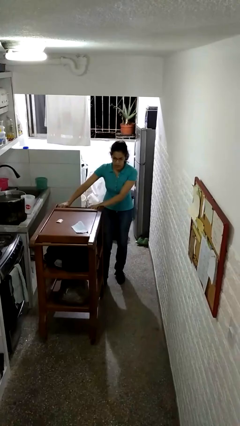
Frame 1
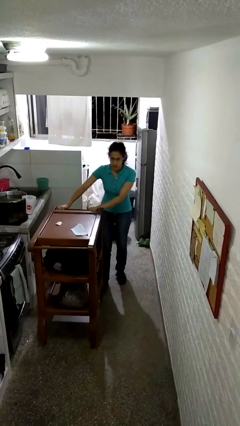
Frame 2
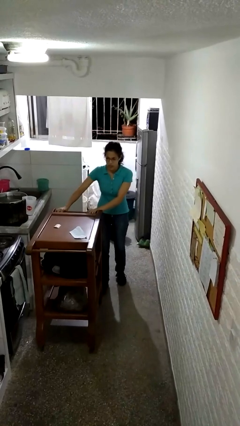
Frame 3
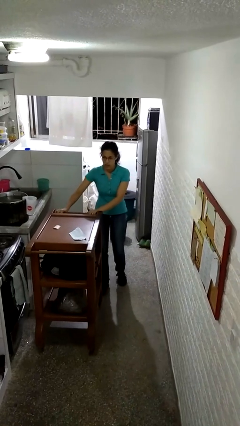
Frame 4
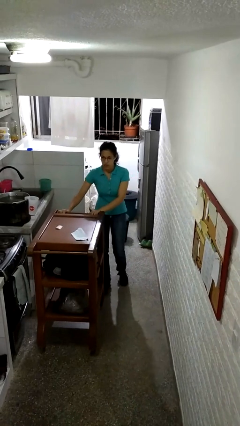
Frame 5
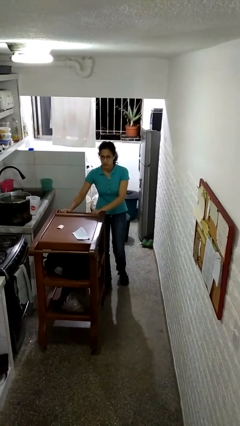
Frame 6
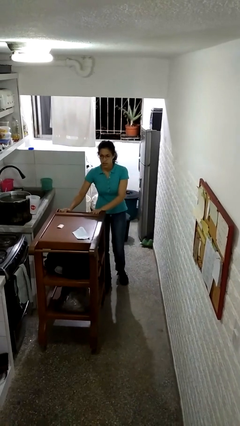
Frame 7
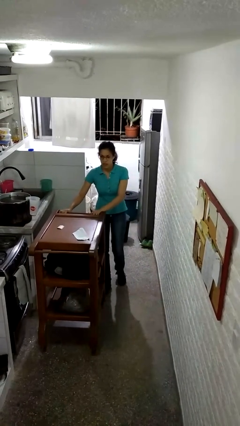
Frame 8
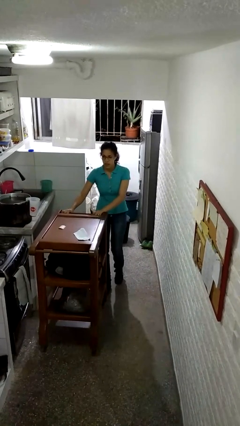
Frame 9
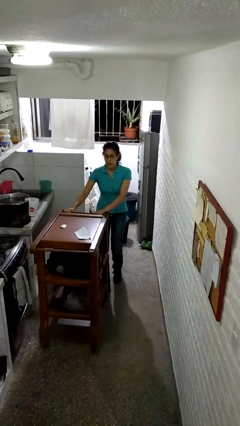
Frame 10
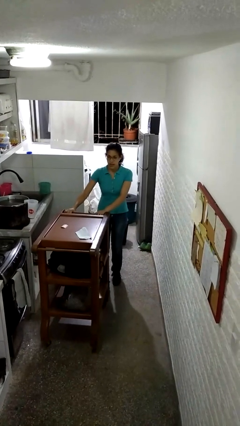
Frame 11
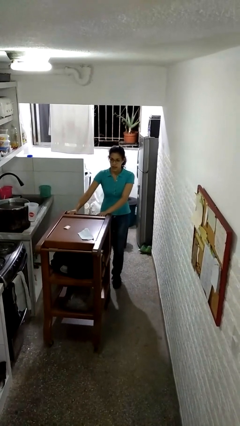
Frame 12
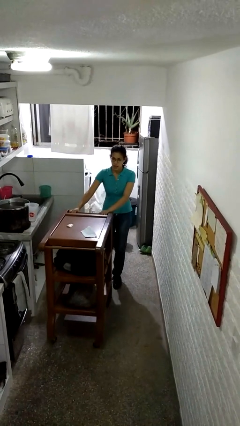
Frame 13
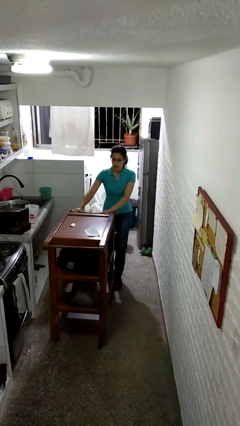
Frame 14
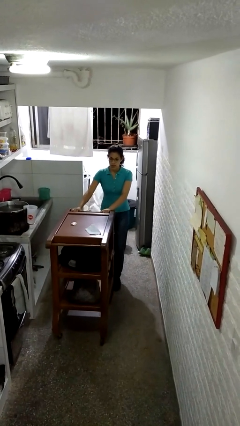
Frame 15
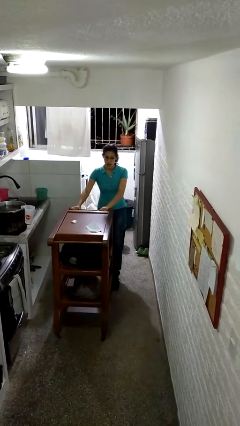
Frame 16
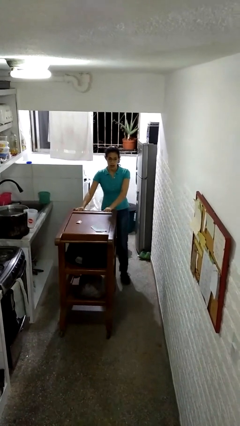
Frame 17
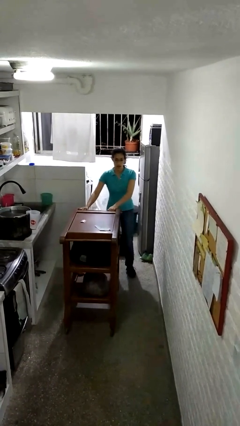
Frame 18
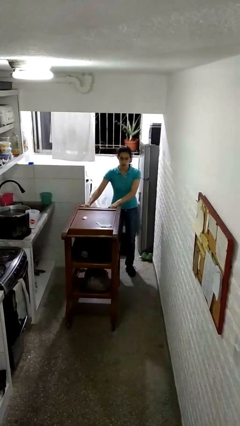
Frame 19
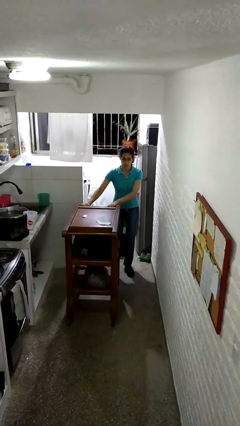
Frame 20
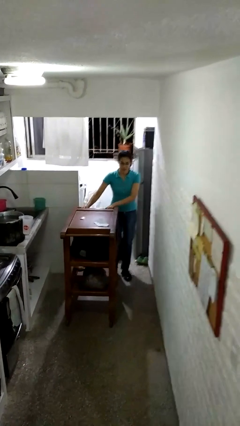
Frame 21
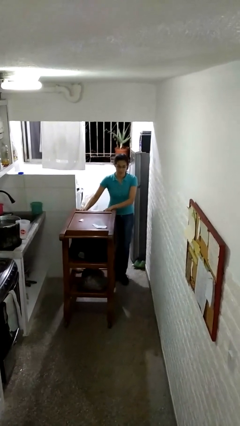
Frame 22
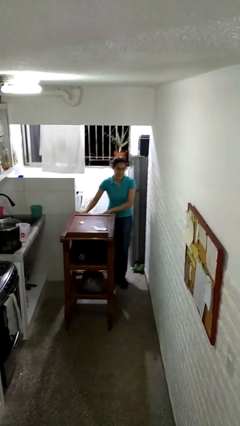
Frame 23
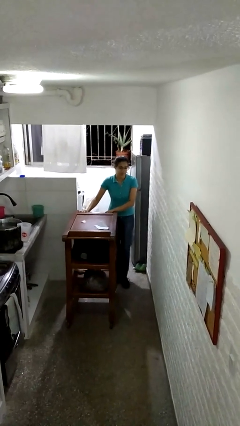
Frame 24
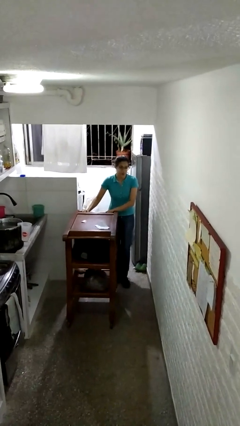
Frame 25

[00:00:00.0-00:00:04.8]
person pulls wheeled cart

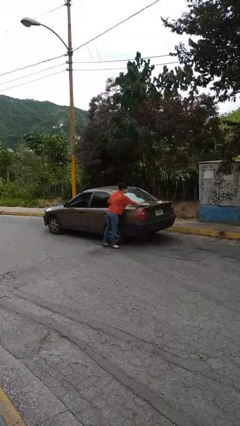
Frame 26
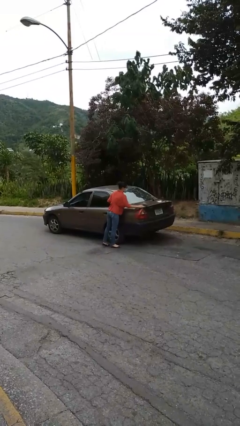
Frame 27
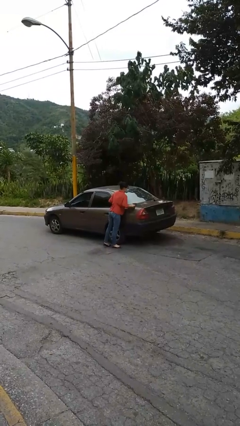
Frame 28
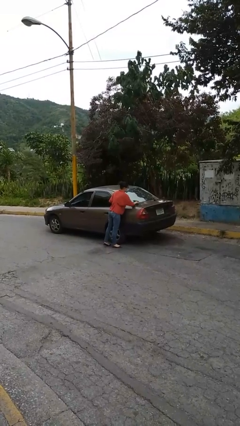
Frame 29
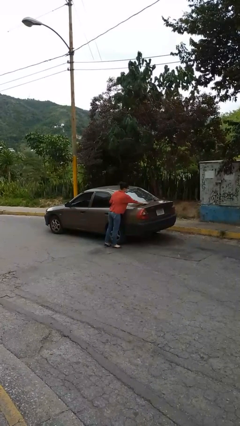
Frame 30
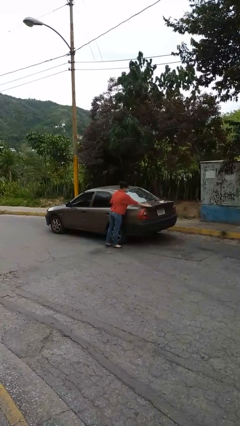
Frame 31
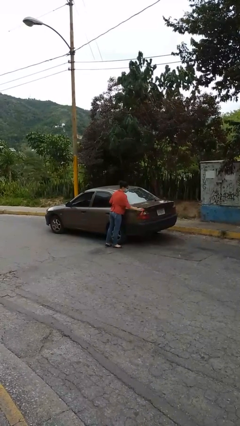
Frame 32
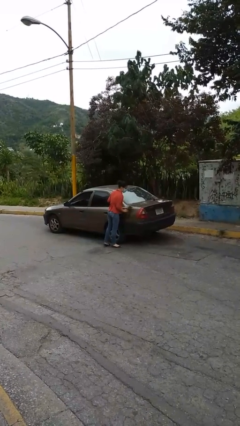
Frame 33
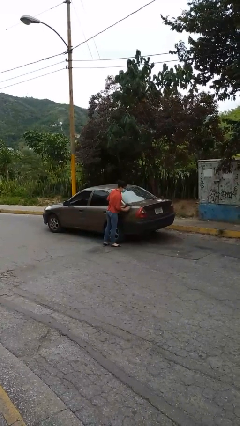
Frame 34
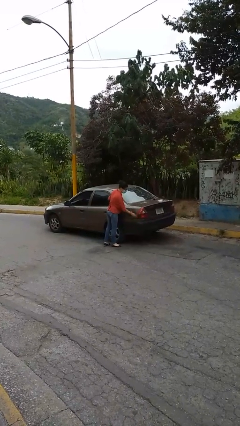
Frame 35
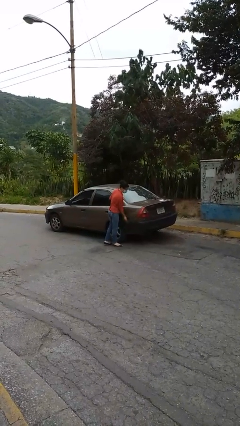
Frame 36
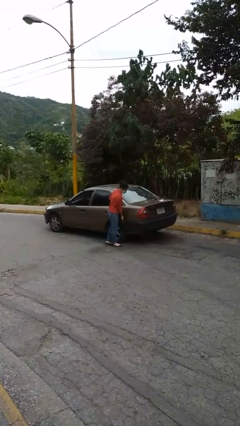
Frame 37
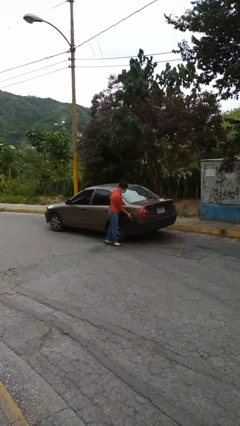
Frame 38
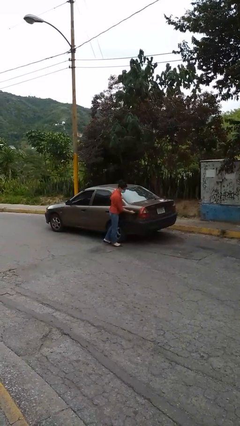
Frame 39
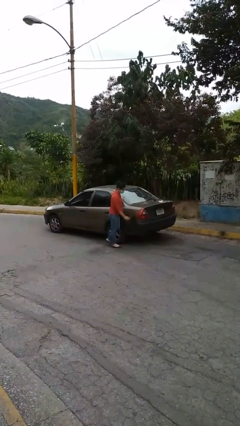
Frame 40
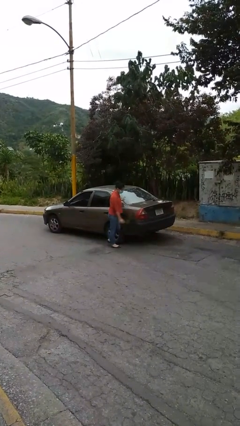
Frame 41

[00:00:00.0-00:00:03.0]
person polishes car with rag

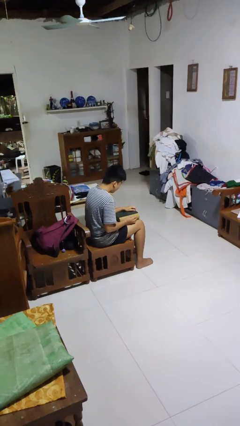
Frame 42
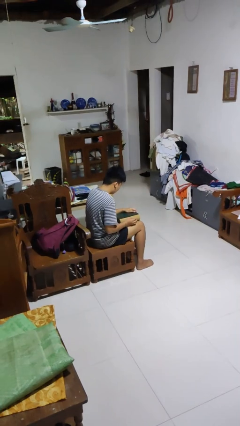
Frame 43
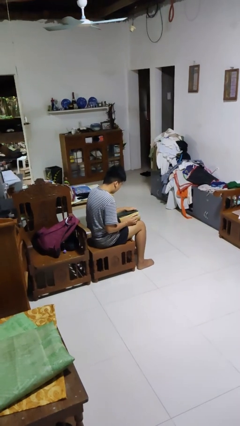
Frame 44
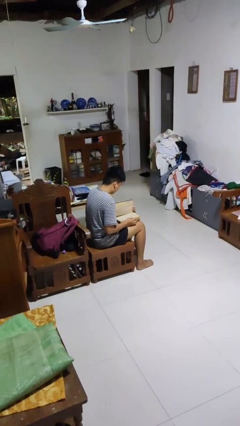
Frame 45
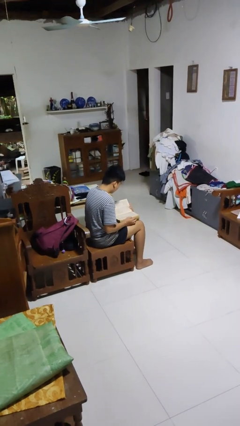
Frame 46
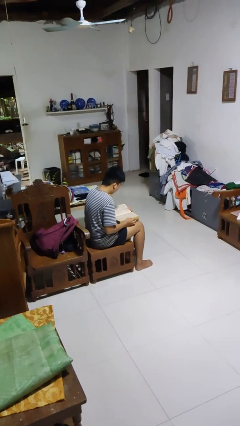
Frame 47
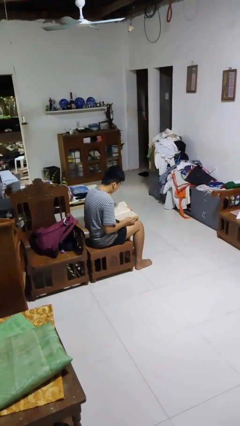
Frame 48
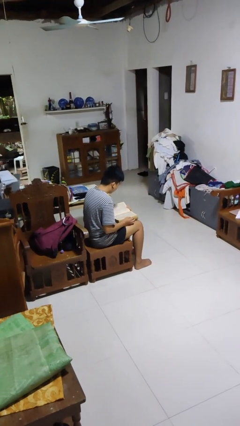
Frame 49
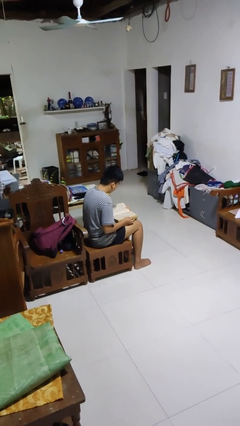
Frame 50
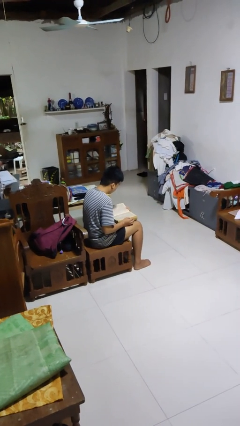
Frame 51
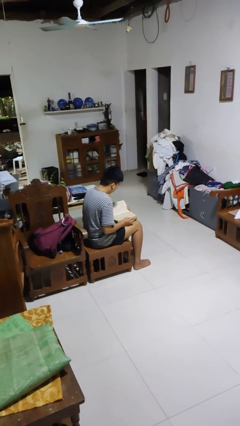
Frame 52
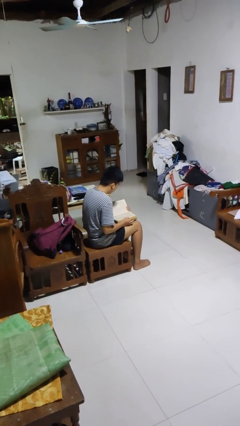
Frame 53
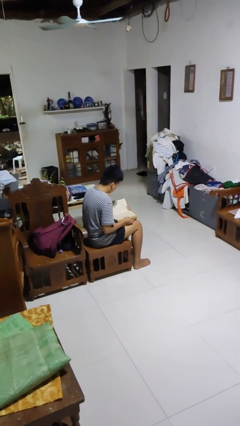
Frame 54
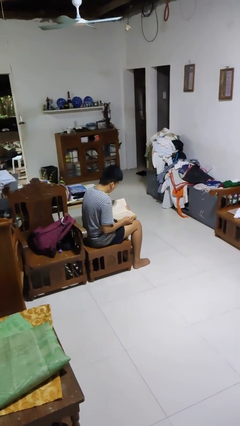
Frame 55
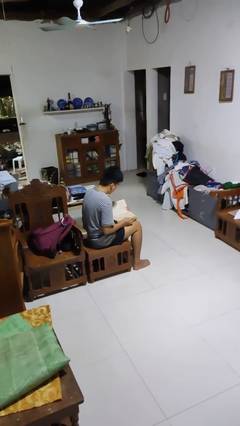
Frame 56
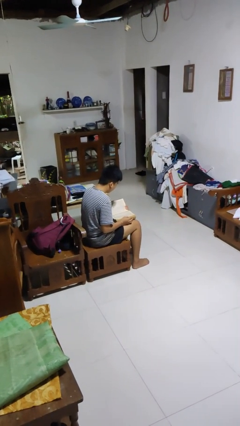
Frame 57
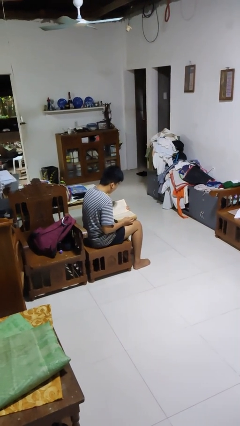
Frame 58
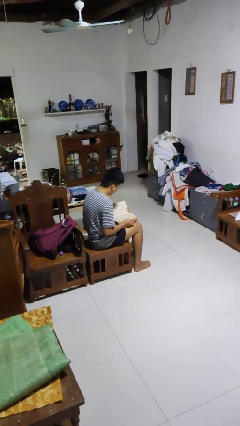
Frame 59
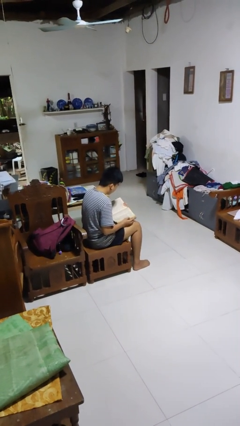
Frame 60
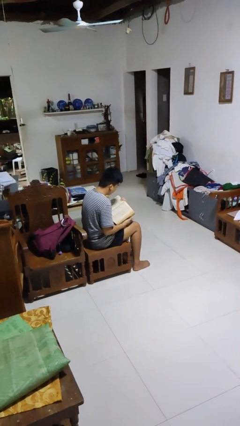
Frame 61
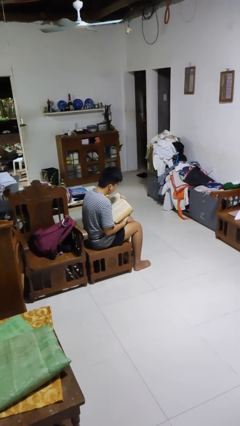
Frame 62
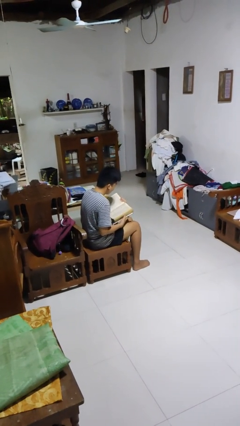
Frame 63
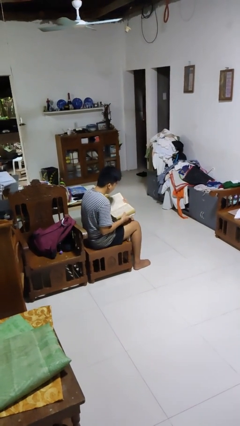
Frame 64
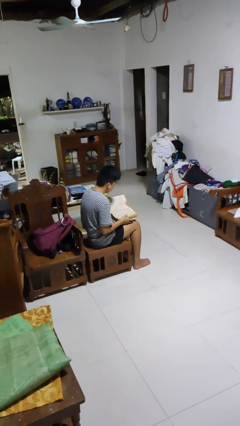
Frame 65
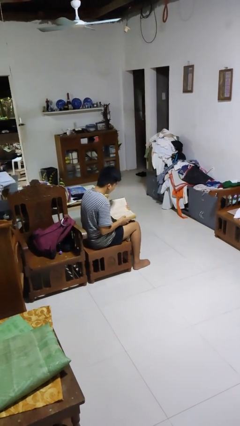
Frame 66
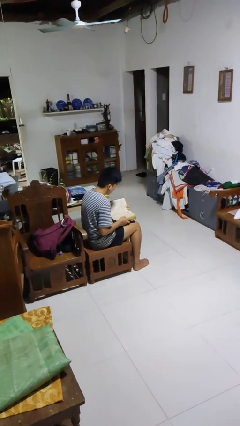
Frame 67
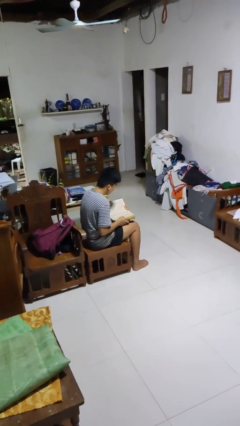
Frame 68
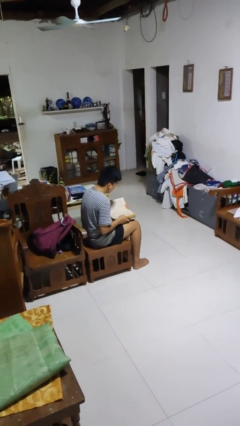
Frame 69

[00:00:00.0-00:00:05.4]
person reads book

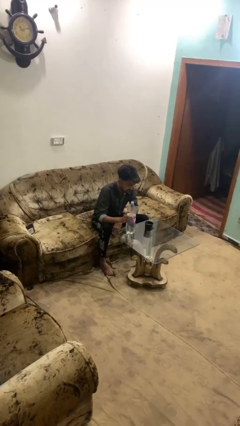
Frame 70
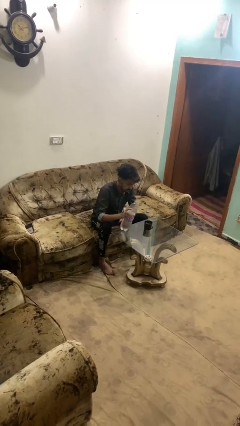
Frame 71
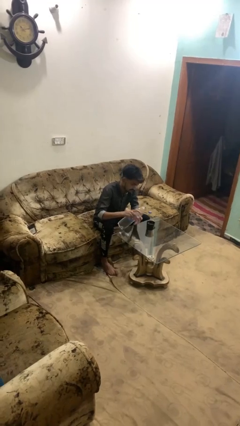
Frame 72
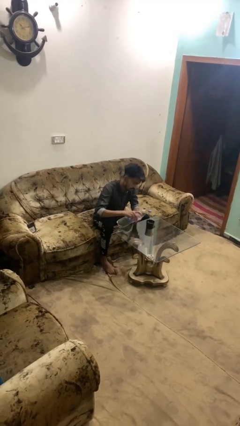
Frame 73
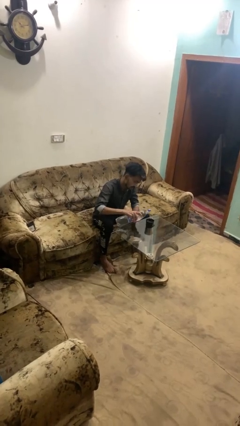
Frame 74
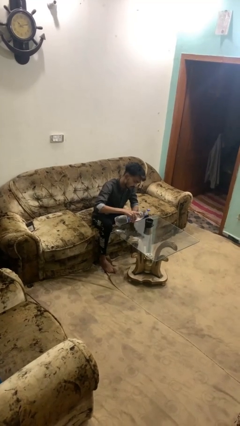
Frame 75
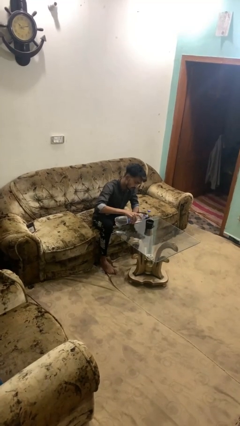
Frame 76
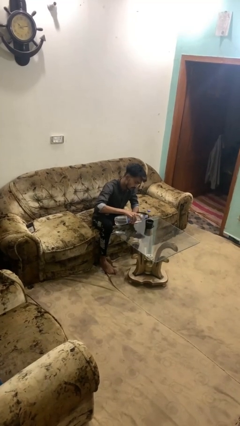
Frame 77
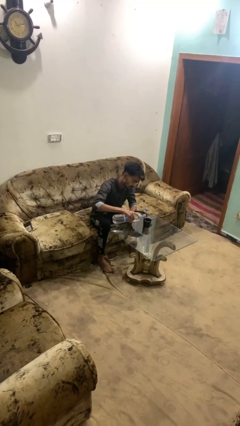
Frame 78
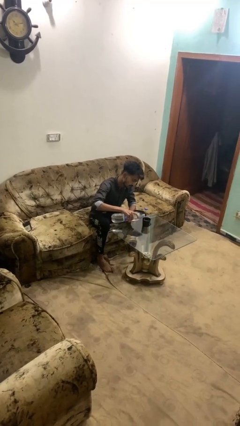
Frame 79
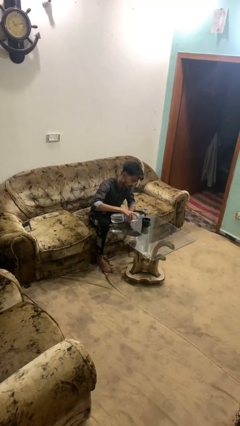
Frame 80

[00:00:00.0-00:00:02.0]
person pours liquid into cup

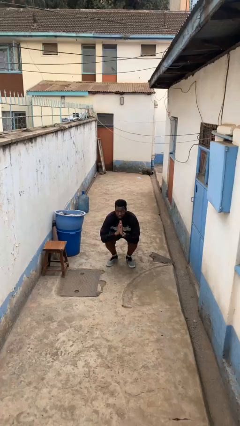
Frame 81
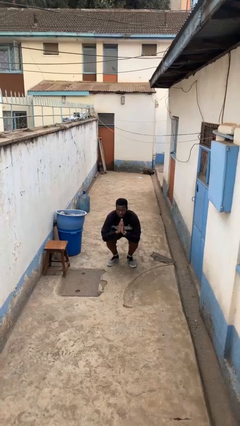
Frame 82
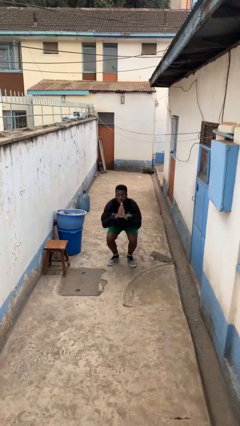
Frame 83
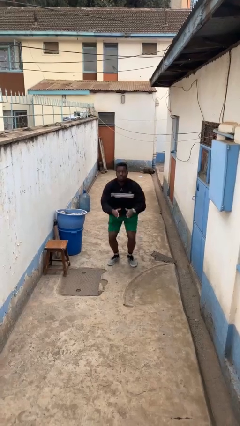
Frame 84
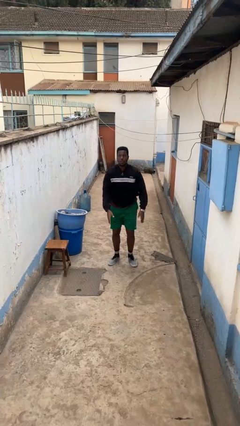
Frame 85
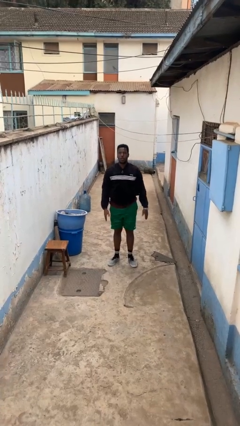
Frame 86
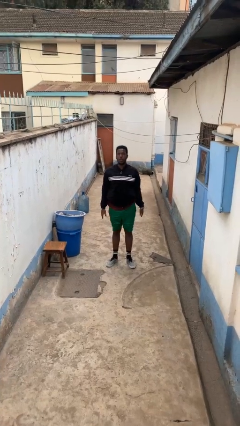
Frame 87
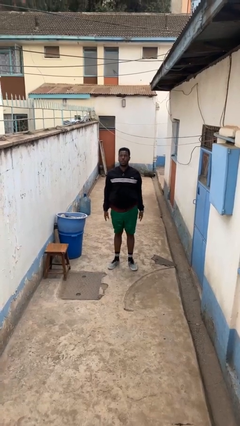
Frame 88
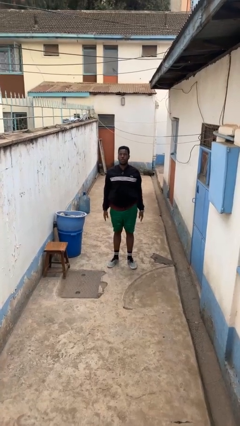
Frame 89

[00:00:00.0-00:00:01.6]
person stands up

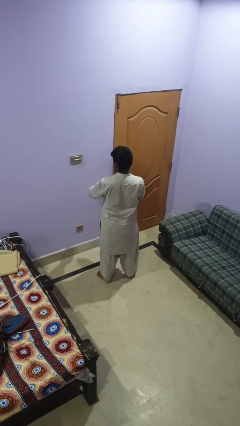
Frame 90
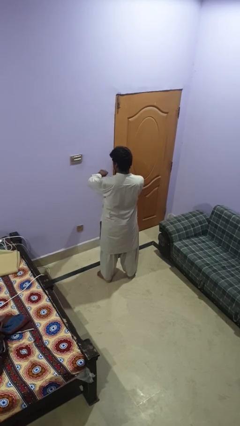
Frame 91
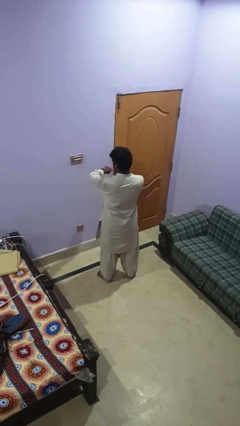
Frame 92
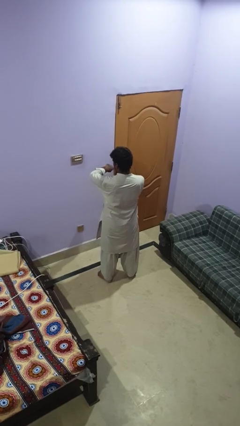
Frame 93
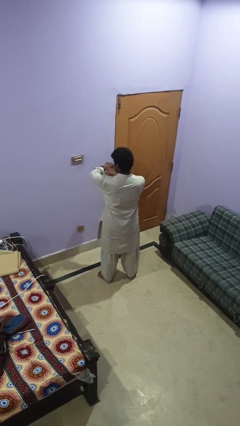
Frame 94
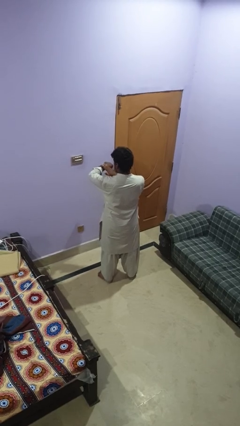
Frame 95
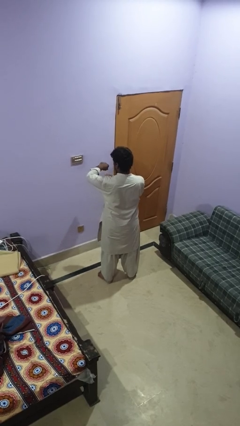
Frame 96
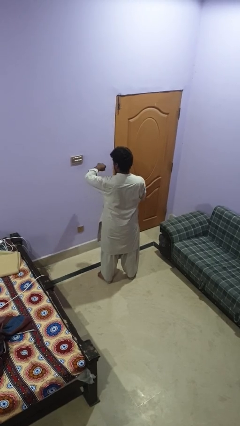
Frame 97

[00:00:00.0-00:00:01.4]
person swats bug
